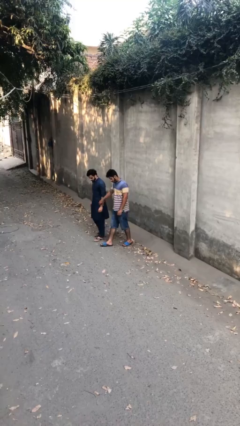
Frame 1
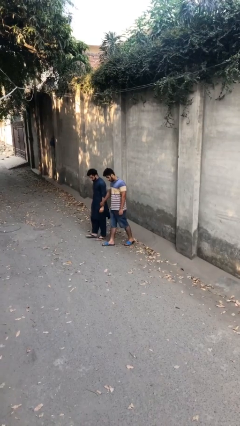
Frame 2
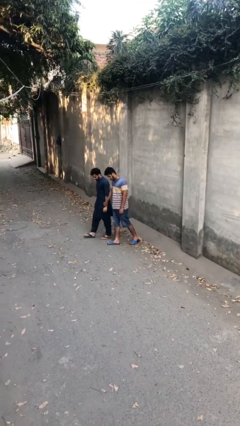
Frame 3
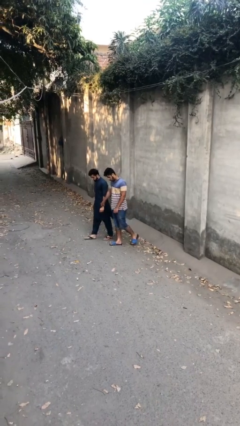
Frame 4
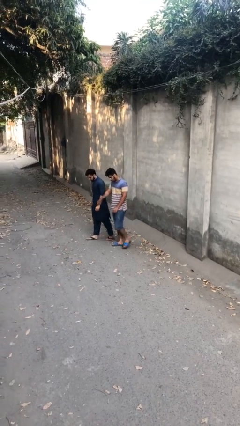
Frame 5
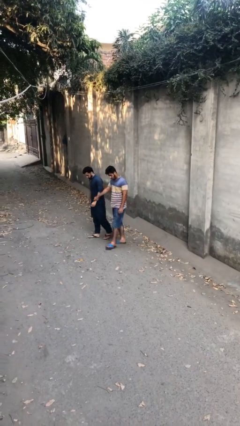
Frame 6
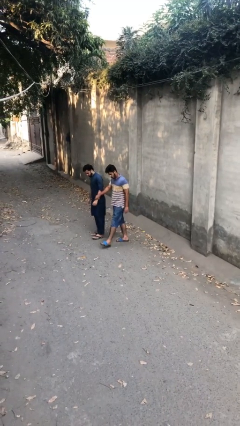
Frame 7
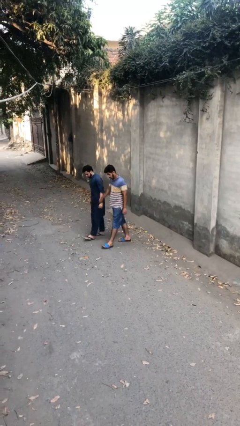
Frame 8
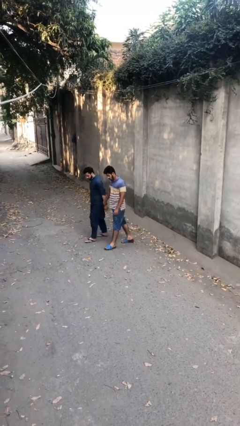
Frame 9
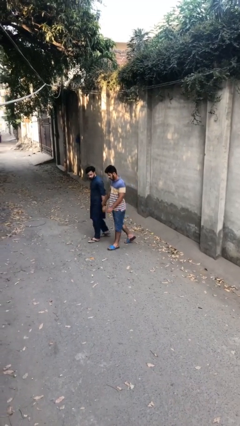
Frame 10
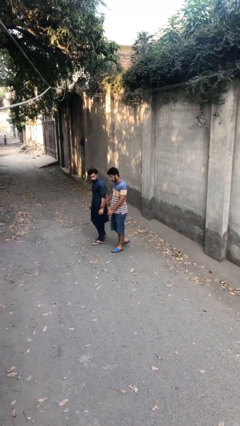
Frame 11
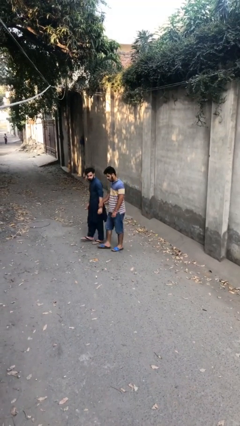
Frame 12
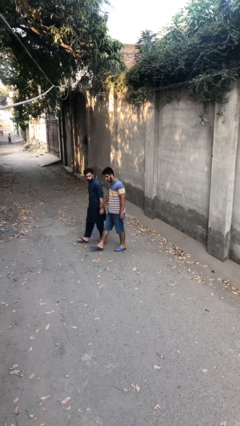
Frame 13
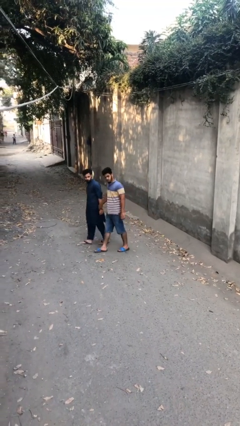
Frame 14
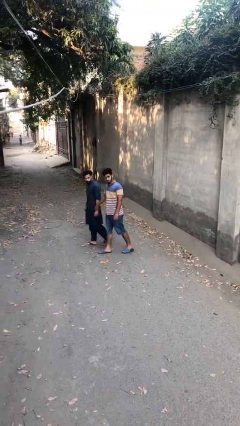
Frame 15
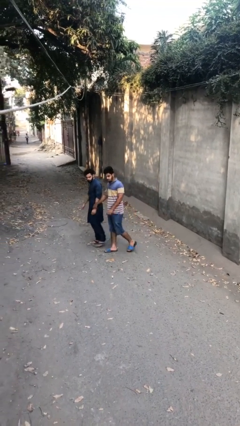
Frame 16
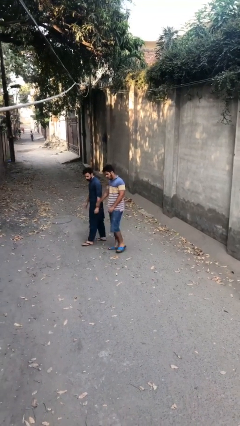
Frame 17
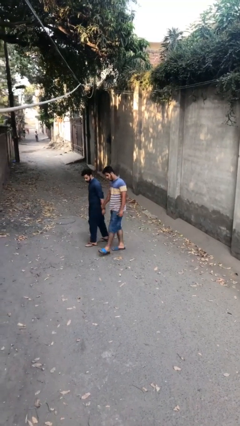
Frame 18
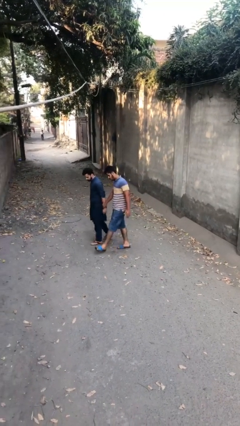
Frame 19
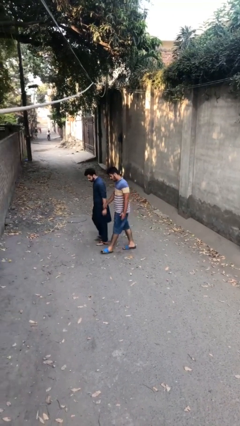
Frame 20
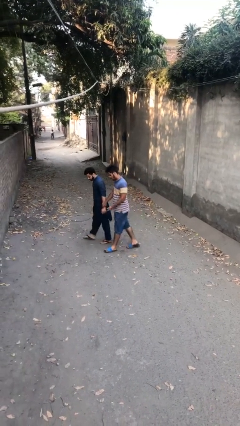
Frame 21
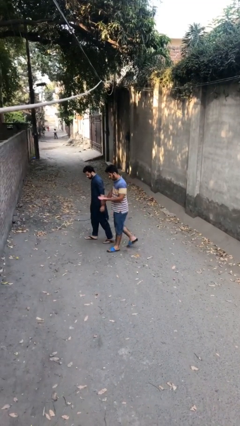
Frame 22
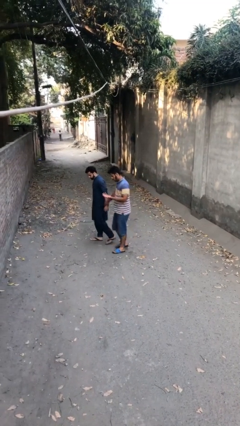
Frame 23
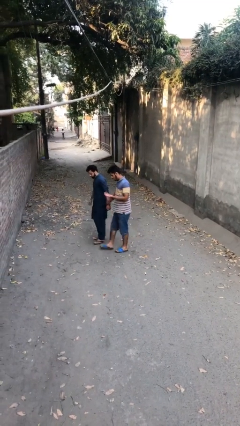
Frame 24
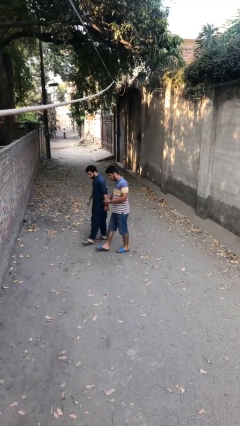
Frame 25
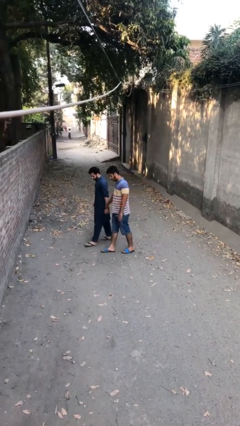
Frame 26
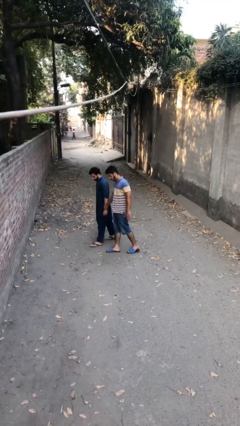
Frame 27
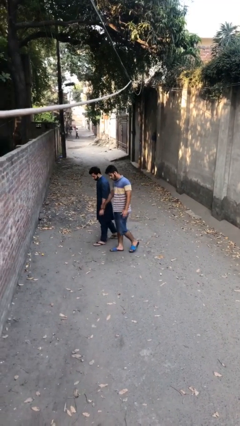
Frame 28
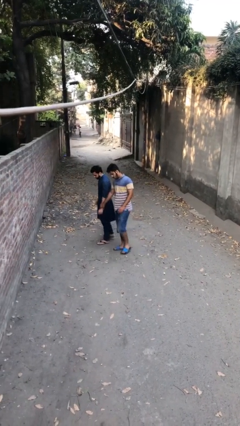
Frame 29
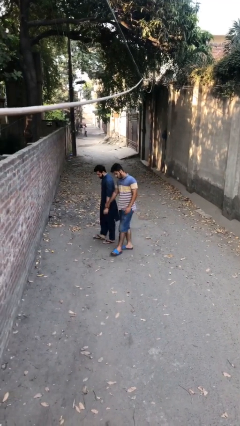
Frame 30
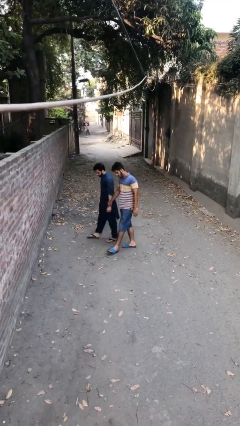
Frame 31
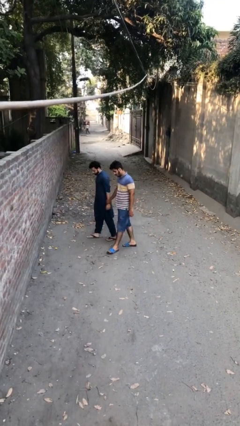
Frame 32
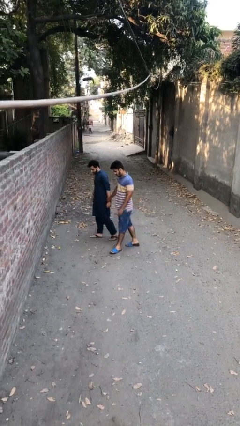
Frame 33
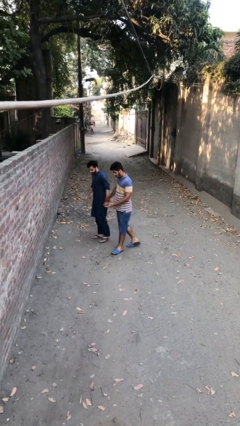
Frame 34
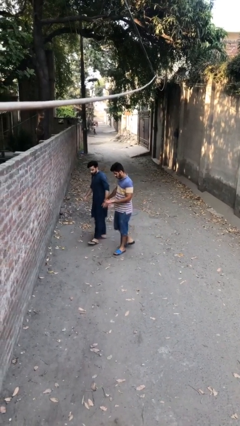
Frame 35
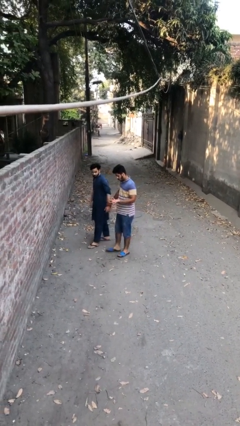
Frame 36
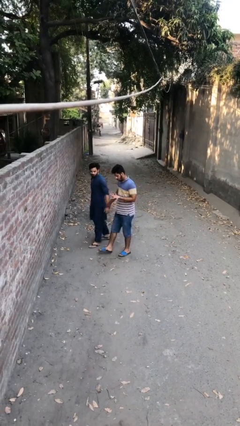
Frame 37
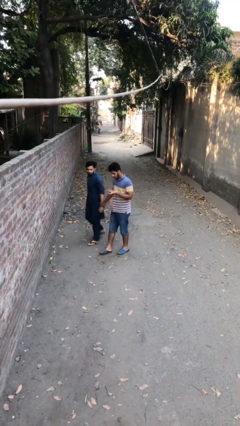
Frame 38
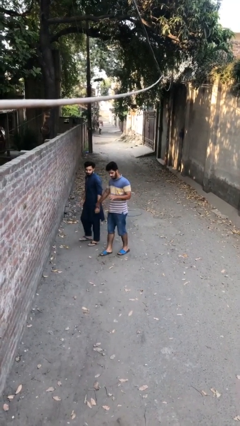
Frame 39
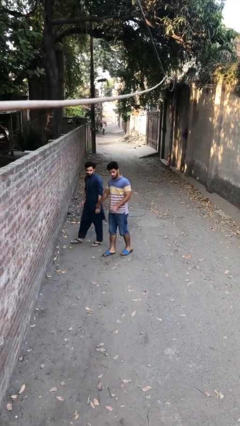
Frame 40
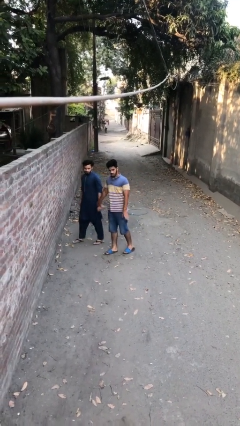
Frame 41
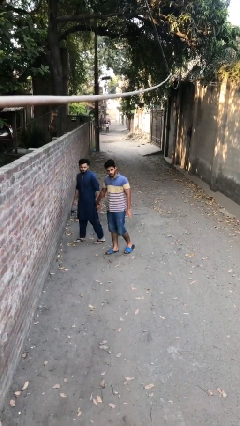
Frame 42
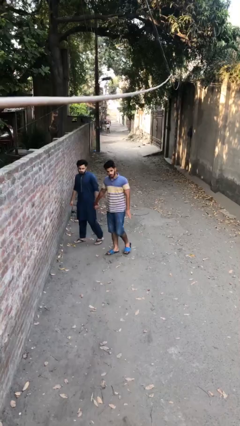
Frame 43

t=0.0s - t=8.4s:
person holds hand

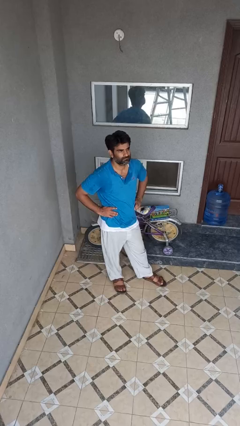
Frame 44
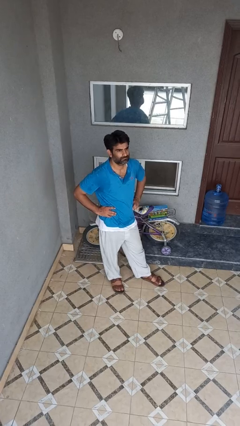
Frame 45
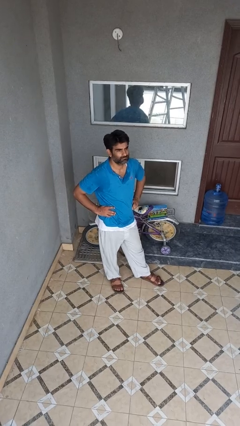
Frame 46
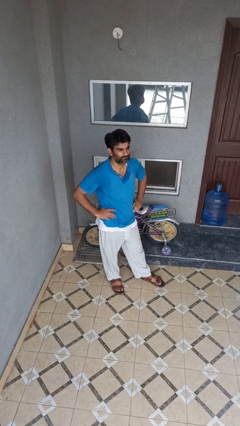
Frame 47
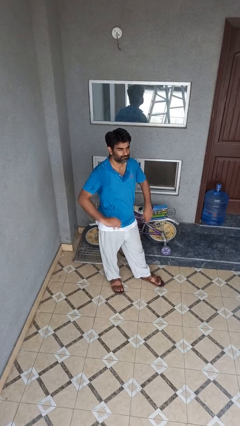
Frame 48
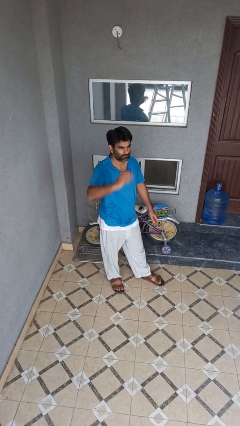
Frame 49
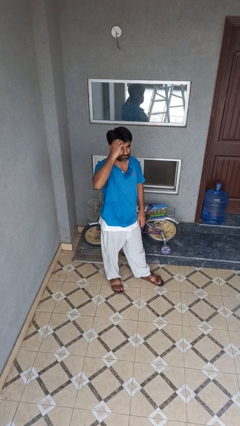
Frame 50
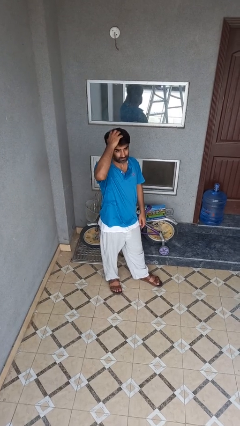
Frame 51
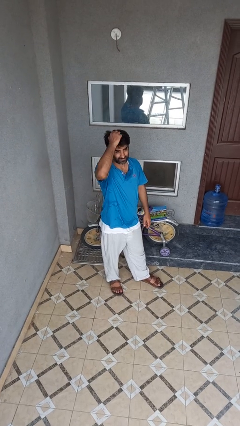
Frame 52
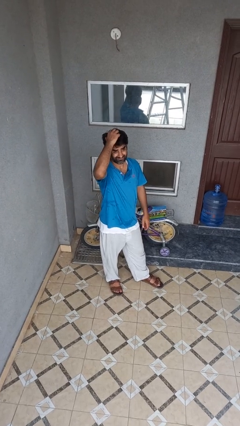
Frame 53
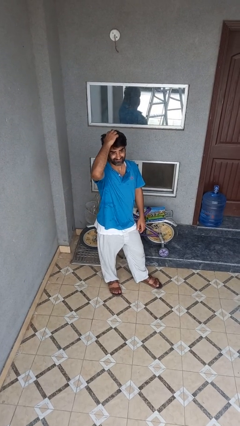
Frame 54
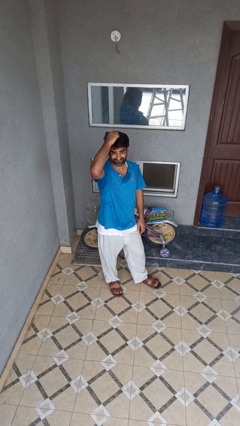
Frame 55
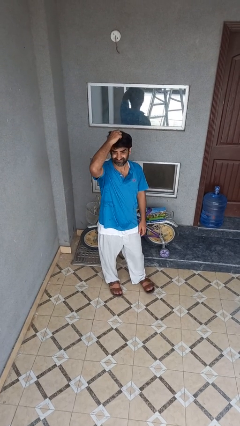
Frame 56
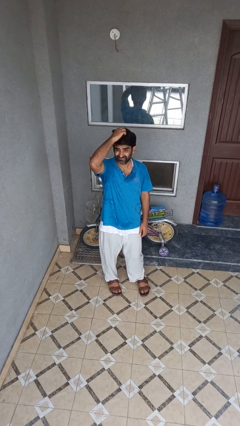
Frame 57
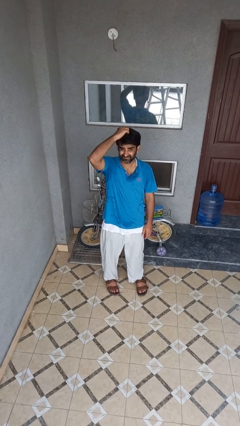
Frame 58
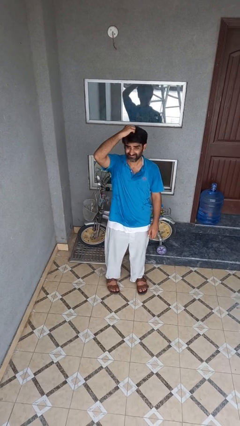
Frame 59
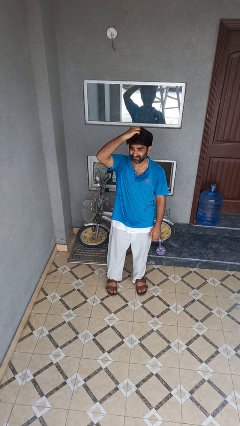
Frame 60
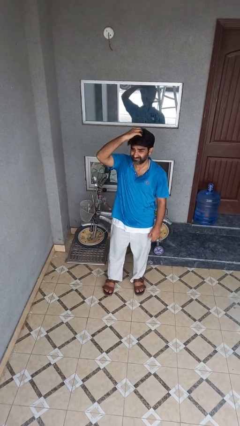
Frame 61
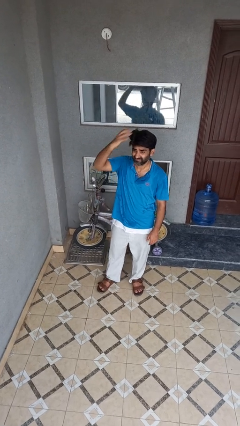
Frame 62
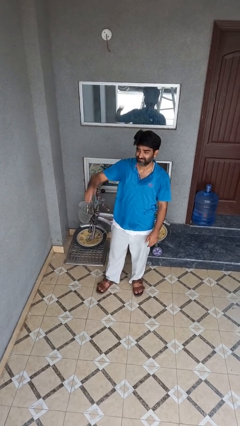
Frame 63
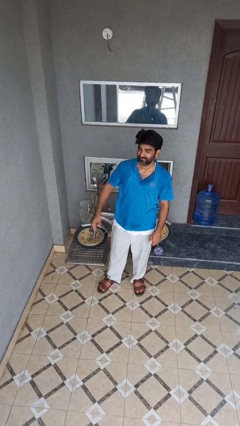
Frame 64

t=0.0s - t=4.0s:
person scratches face

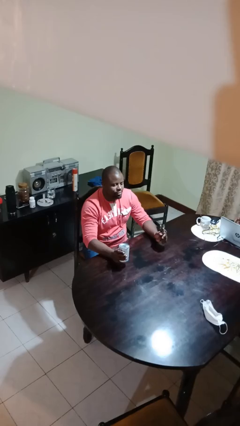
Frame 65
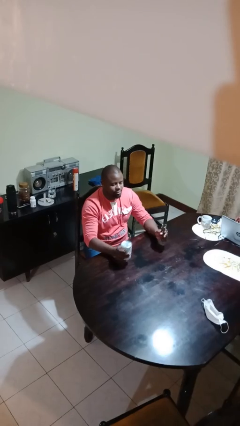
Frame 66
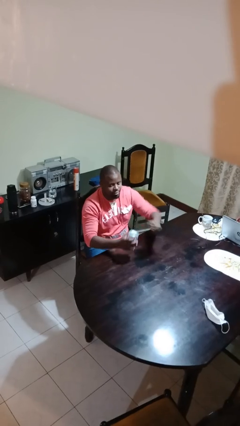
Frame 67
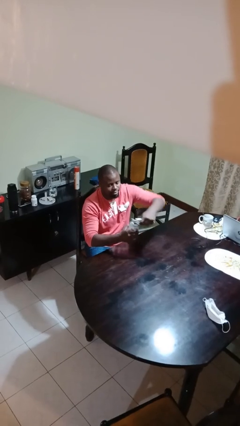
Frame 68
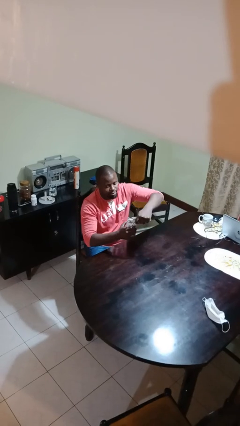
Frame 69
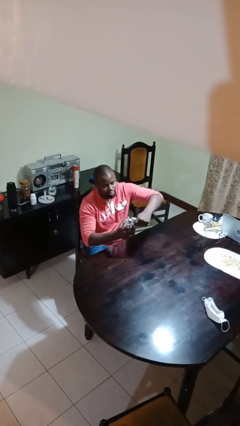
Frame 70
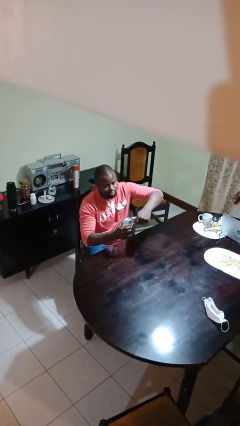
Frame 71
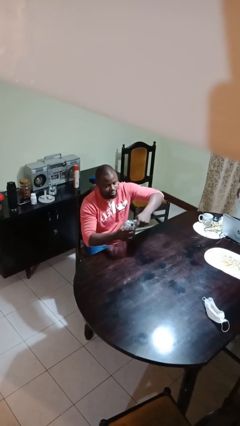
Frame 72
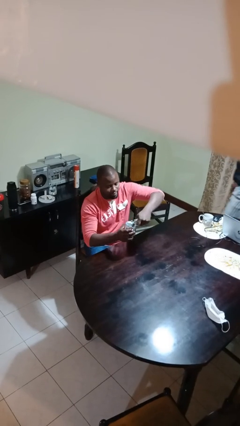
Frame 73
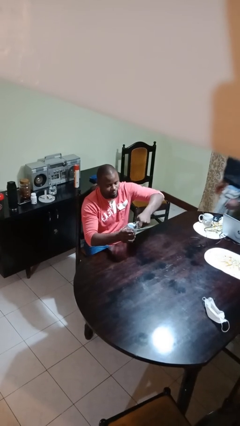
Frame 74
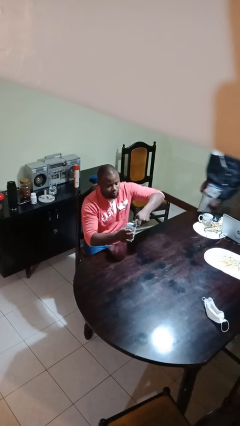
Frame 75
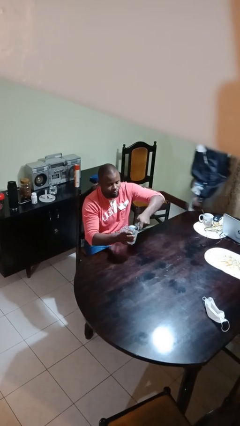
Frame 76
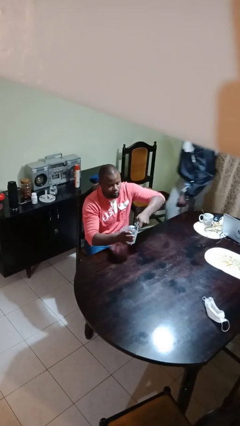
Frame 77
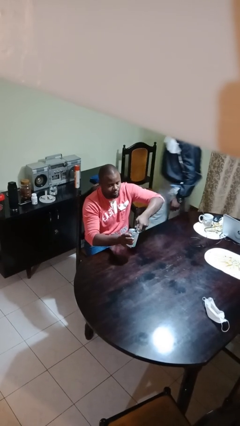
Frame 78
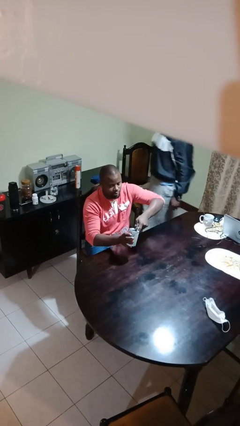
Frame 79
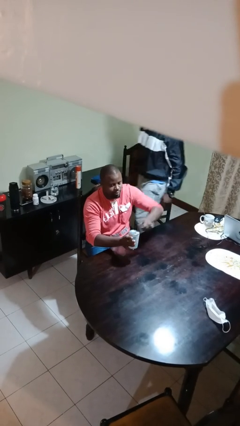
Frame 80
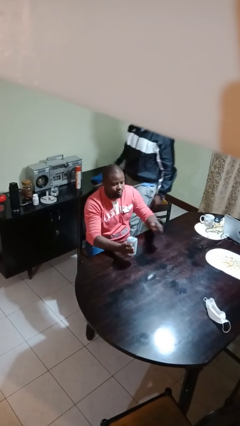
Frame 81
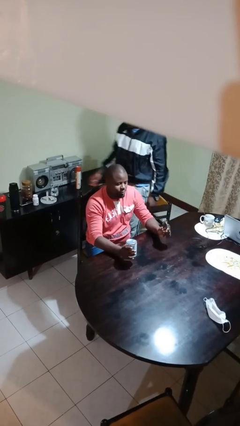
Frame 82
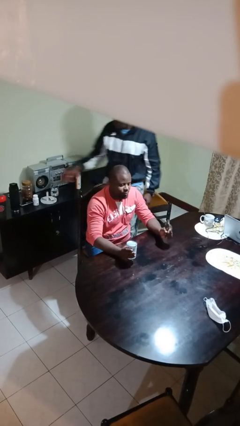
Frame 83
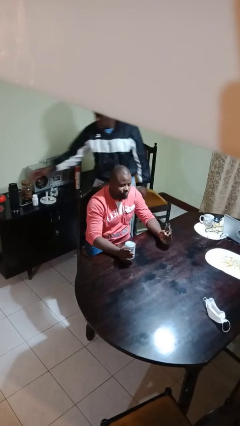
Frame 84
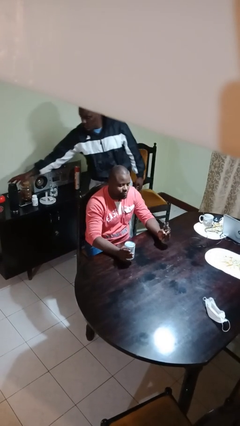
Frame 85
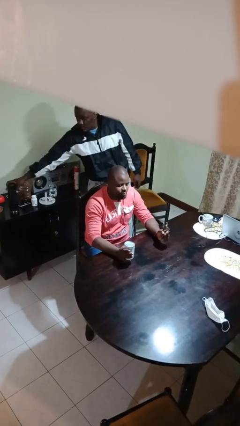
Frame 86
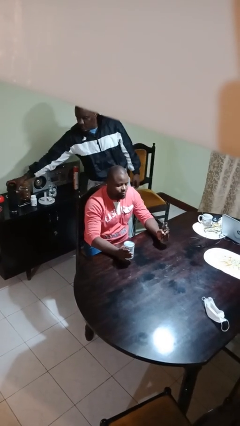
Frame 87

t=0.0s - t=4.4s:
person opens can with can opener

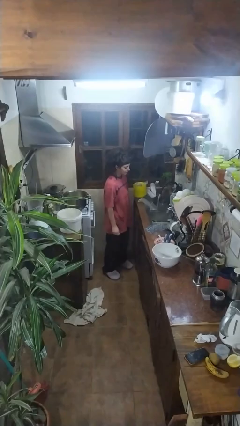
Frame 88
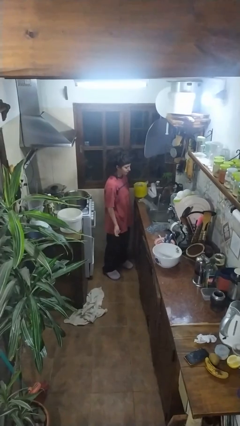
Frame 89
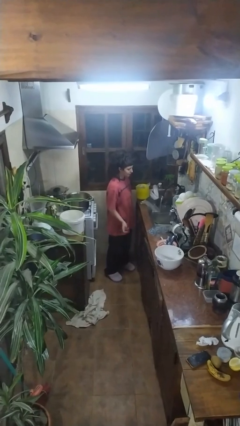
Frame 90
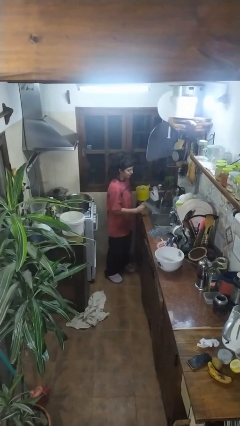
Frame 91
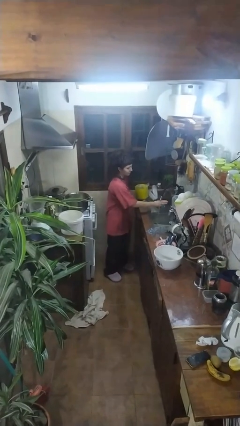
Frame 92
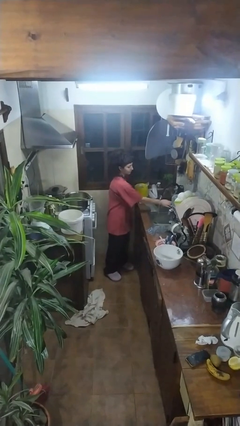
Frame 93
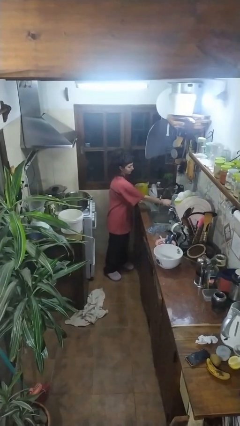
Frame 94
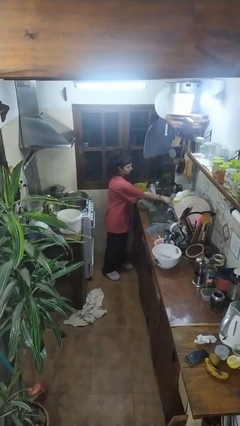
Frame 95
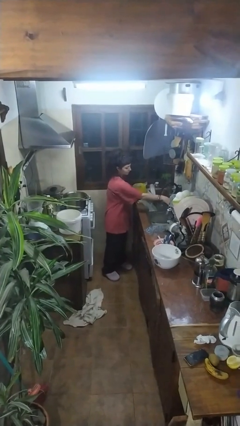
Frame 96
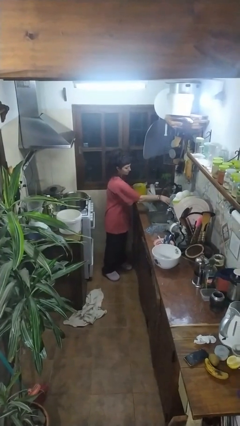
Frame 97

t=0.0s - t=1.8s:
person turns off faucet
